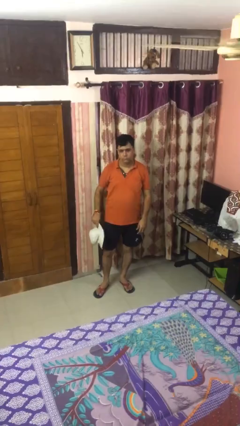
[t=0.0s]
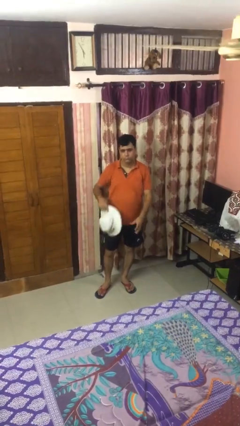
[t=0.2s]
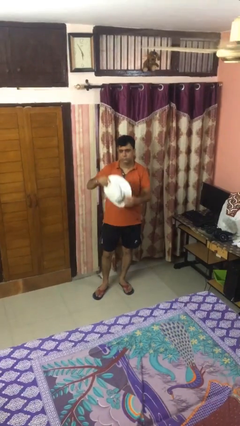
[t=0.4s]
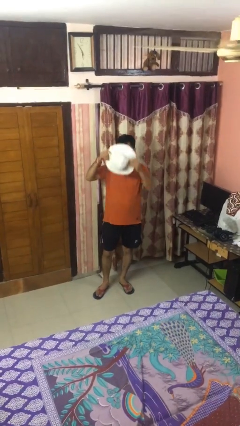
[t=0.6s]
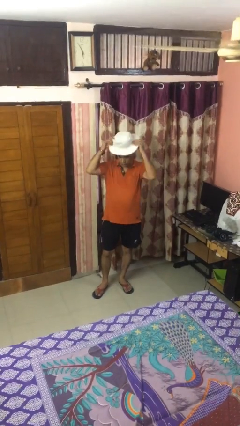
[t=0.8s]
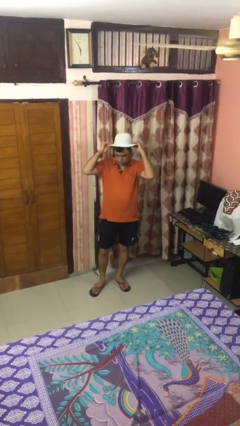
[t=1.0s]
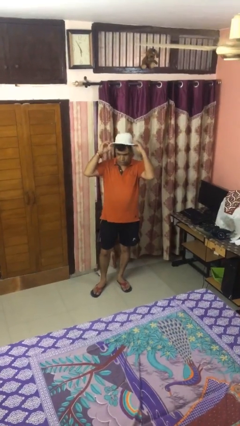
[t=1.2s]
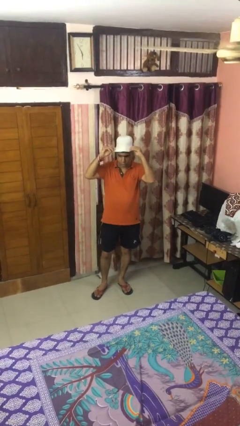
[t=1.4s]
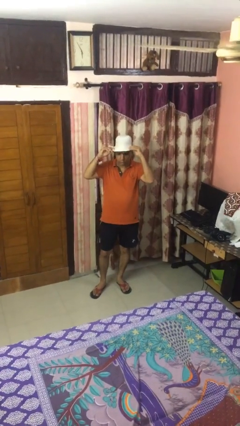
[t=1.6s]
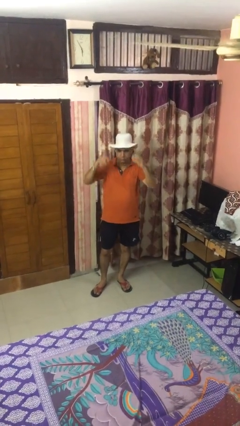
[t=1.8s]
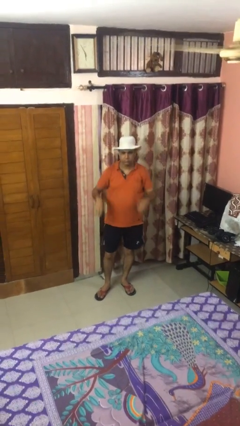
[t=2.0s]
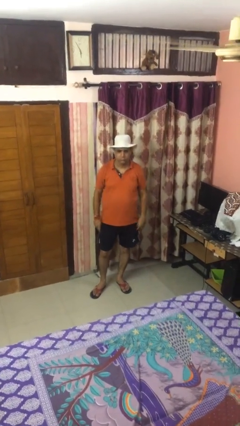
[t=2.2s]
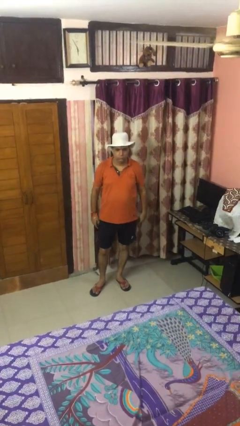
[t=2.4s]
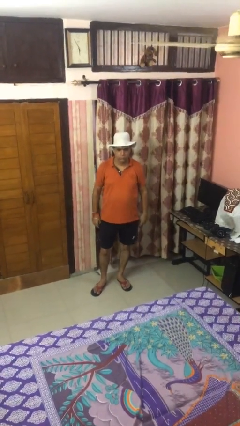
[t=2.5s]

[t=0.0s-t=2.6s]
person puts on hat

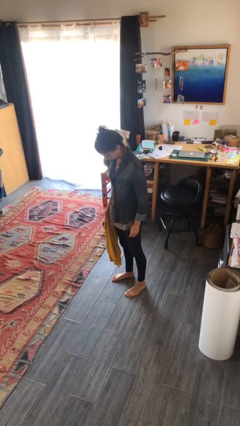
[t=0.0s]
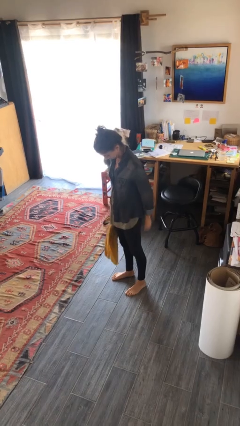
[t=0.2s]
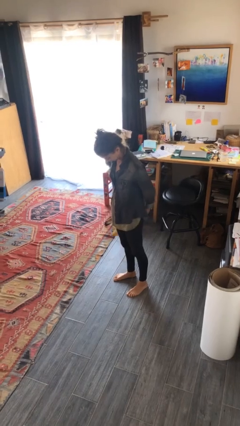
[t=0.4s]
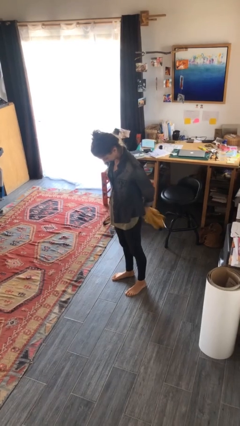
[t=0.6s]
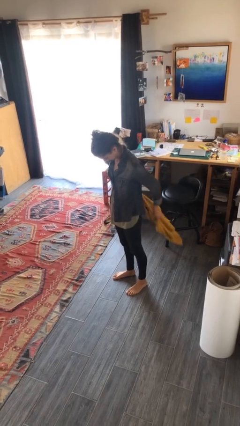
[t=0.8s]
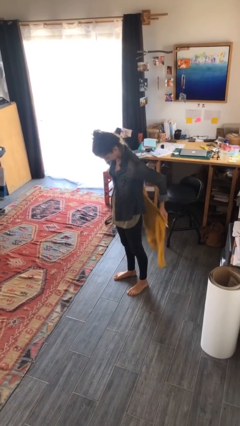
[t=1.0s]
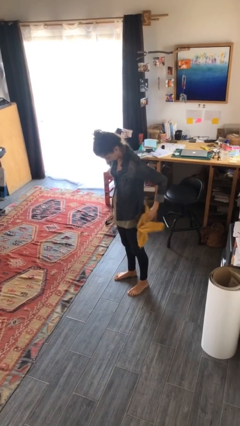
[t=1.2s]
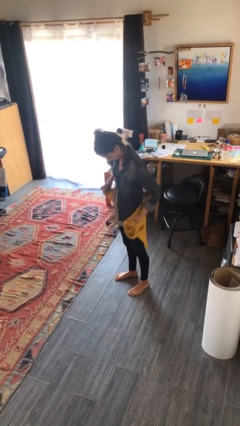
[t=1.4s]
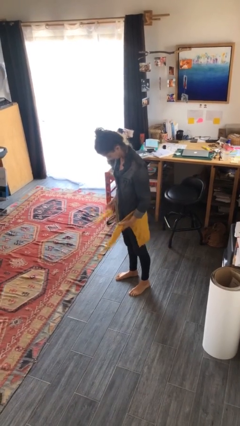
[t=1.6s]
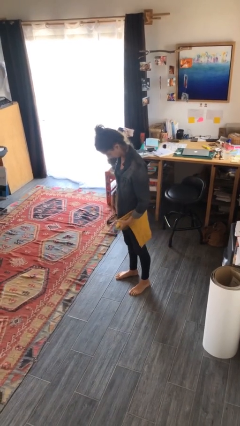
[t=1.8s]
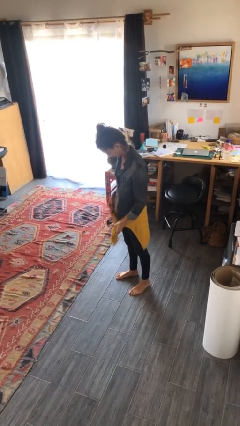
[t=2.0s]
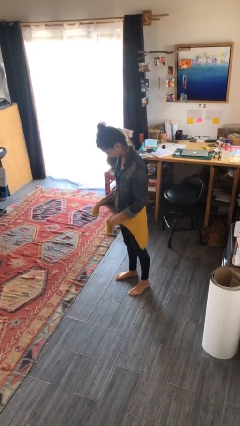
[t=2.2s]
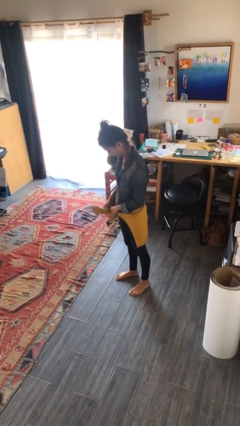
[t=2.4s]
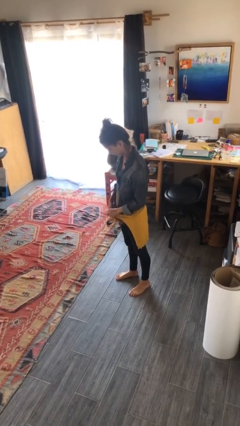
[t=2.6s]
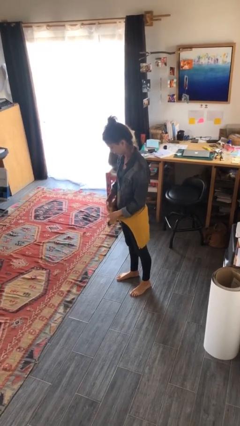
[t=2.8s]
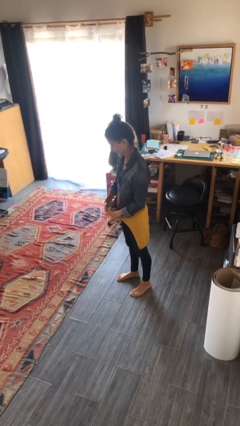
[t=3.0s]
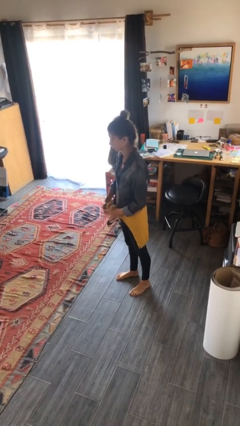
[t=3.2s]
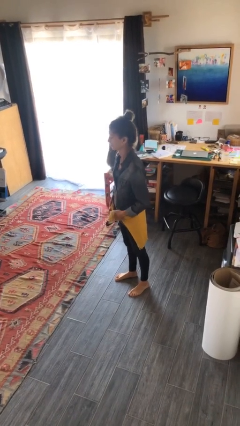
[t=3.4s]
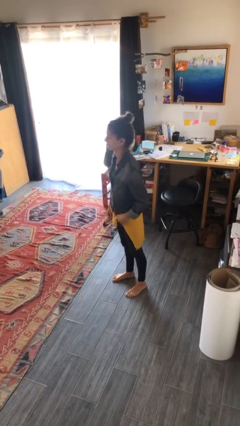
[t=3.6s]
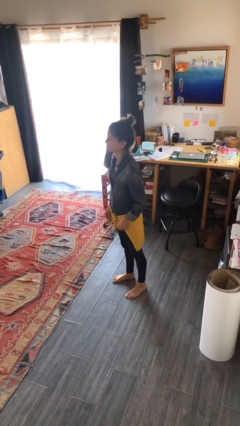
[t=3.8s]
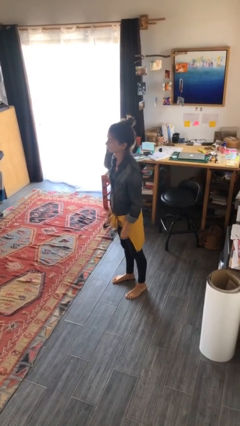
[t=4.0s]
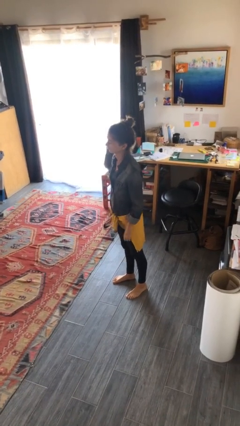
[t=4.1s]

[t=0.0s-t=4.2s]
person ties jacket around waist

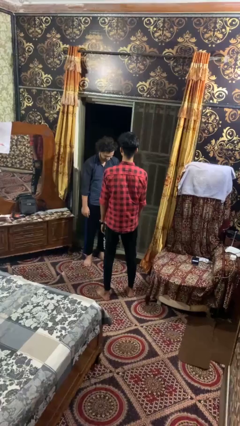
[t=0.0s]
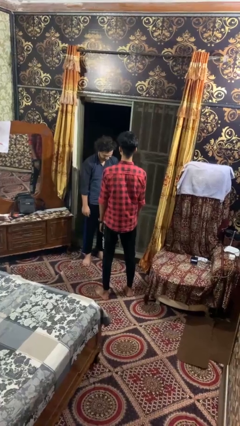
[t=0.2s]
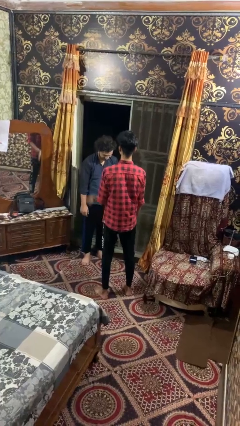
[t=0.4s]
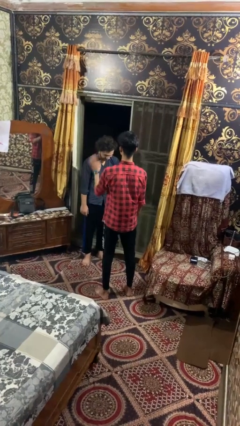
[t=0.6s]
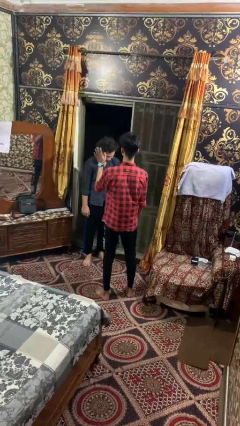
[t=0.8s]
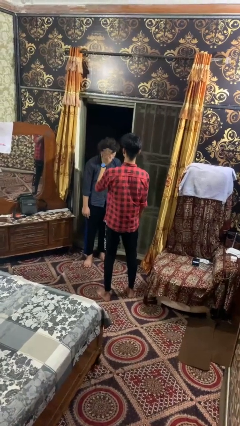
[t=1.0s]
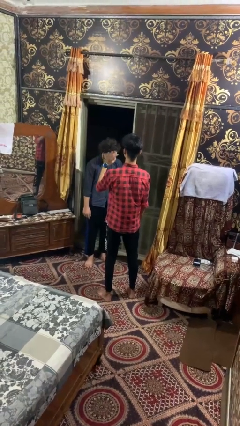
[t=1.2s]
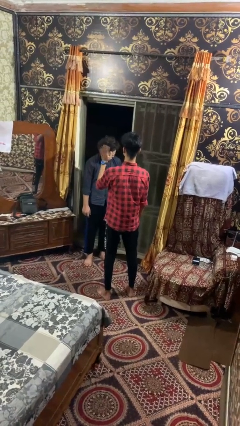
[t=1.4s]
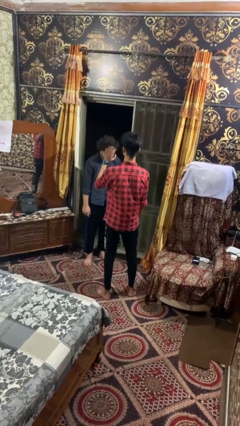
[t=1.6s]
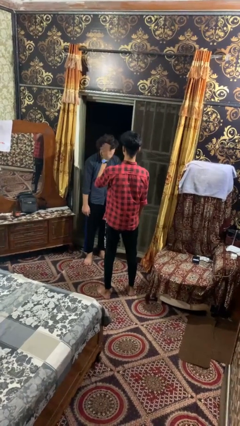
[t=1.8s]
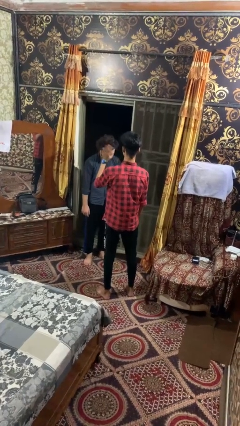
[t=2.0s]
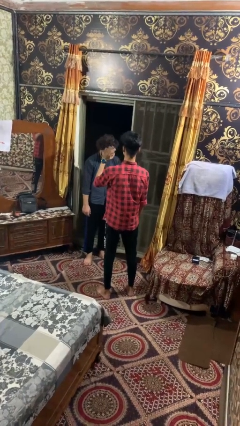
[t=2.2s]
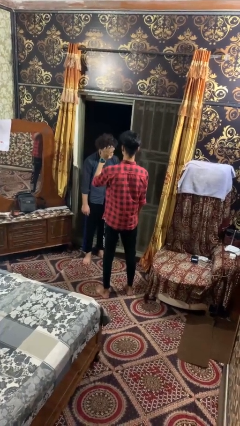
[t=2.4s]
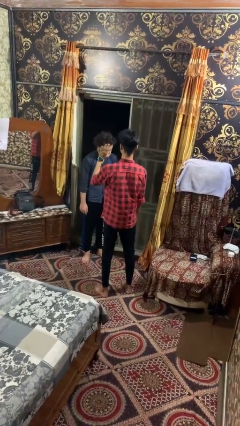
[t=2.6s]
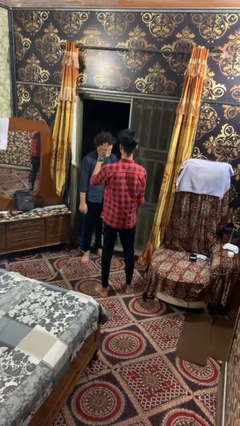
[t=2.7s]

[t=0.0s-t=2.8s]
person waves at person

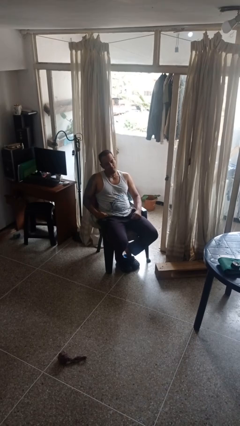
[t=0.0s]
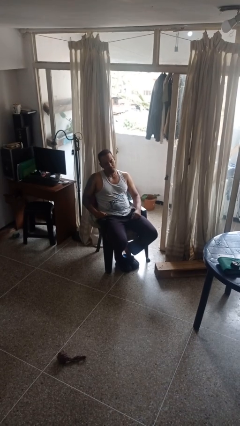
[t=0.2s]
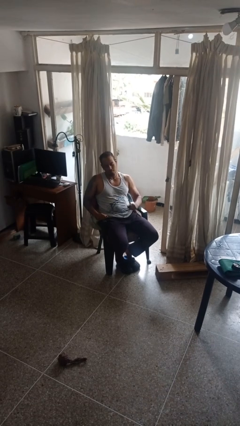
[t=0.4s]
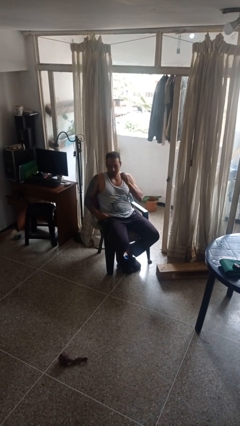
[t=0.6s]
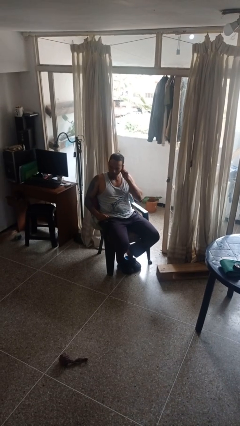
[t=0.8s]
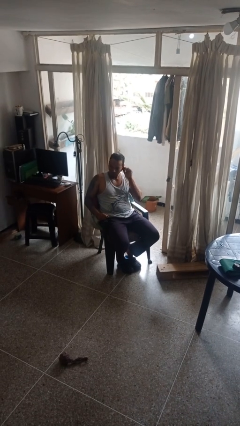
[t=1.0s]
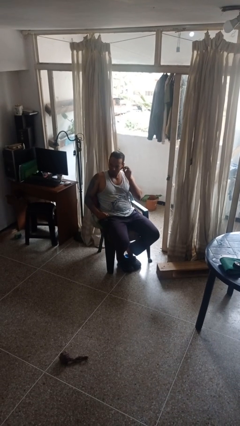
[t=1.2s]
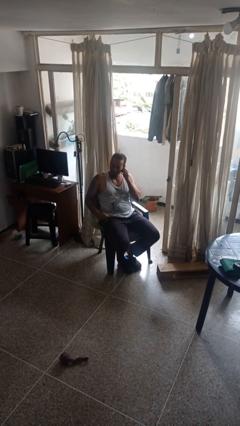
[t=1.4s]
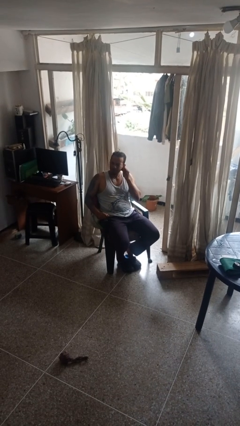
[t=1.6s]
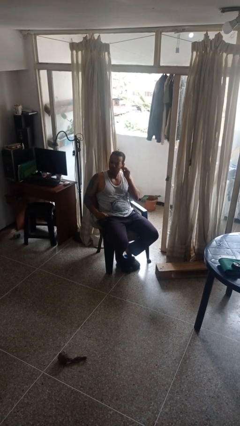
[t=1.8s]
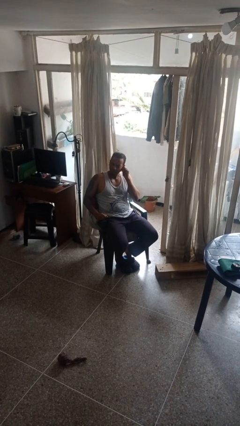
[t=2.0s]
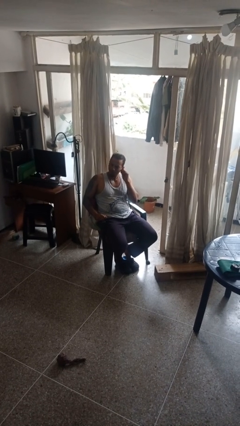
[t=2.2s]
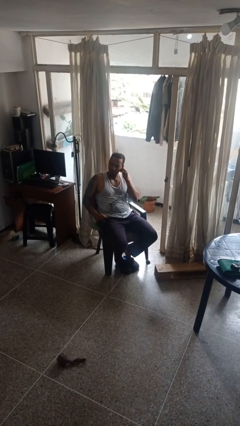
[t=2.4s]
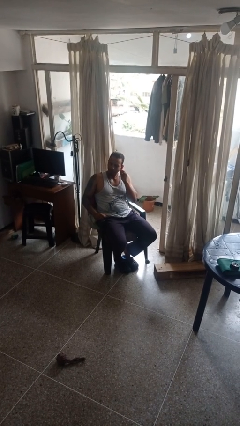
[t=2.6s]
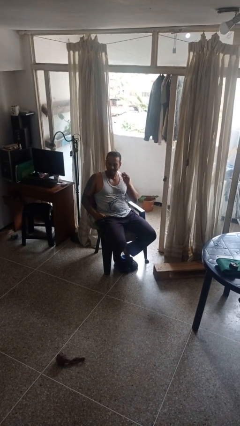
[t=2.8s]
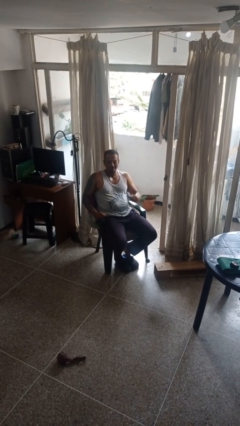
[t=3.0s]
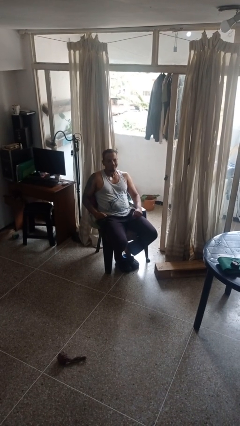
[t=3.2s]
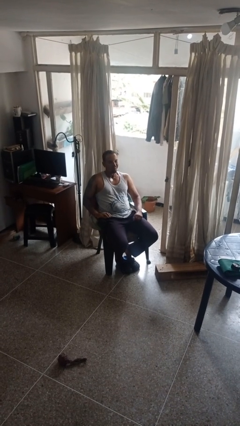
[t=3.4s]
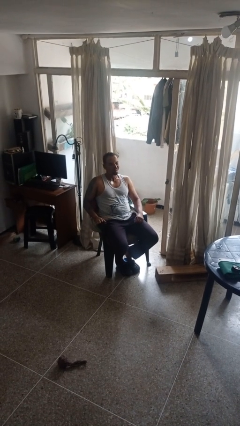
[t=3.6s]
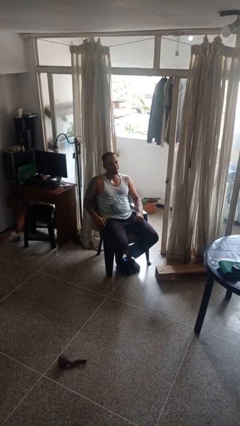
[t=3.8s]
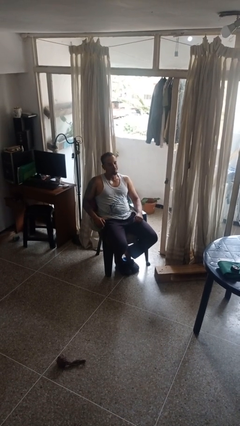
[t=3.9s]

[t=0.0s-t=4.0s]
person touches earlobe

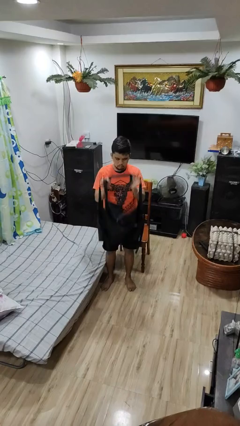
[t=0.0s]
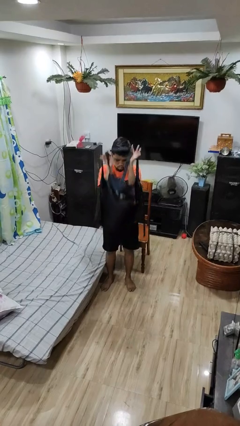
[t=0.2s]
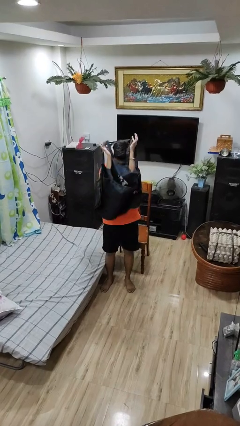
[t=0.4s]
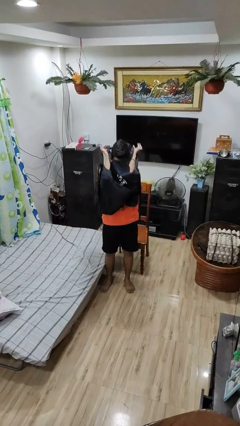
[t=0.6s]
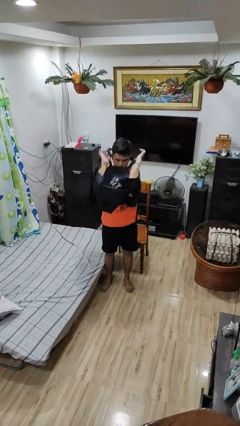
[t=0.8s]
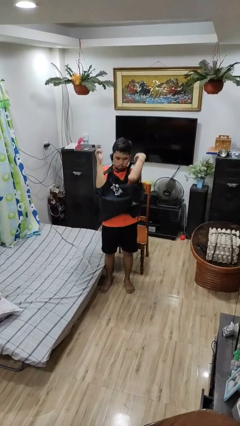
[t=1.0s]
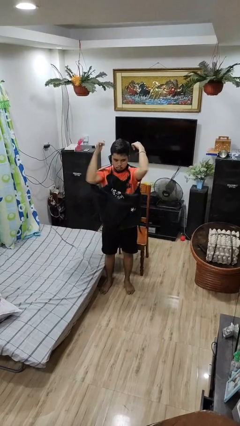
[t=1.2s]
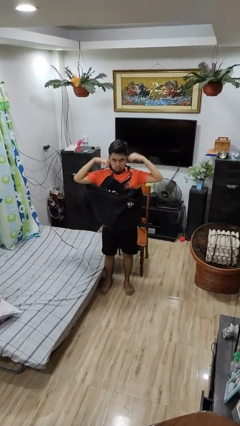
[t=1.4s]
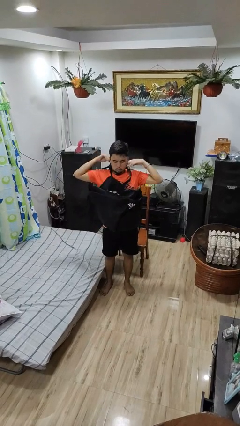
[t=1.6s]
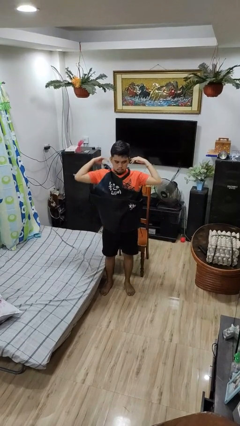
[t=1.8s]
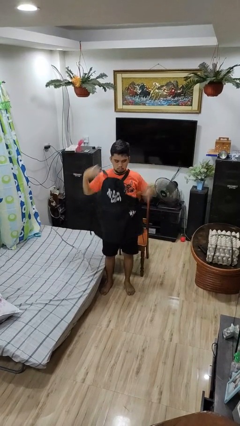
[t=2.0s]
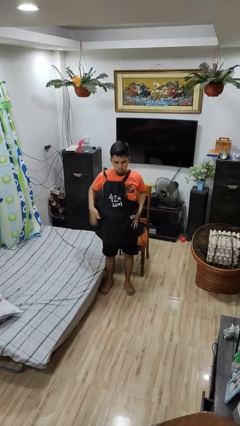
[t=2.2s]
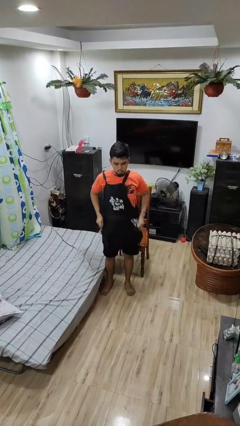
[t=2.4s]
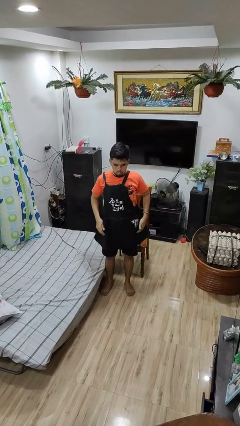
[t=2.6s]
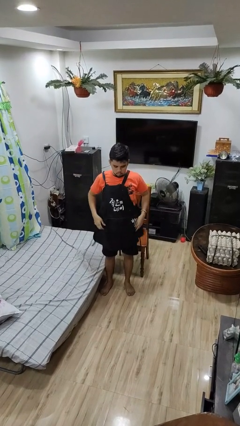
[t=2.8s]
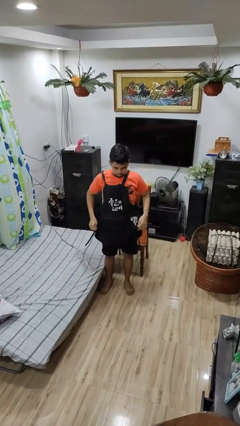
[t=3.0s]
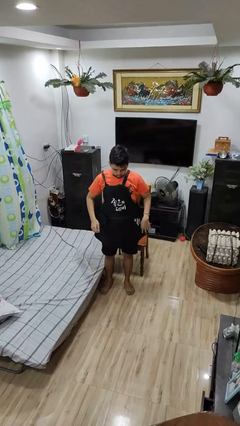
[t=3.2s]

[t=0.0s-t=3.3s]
person puts on apron

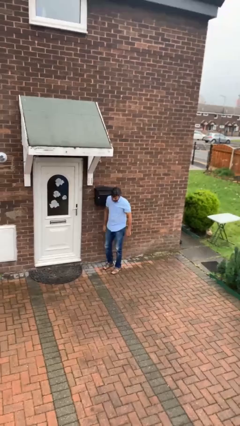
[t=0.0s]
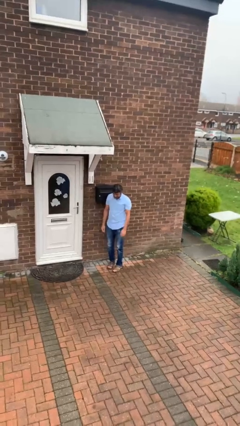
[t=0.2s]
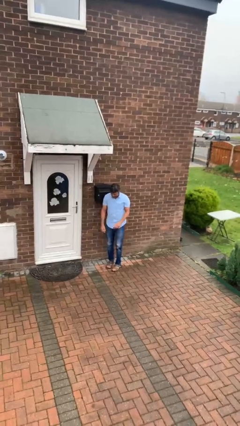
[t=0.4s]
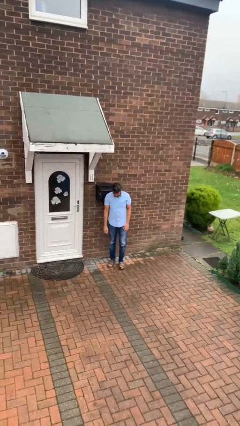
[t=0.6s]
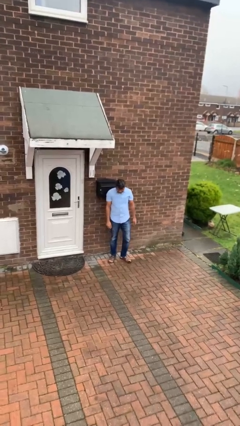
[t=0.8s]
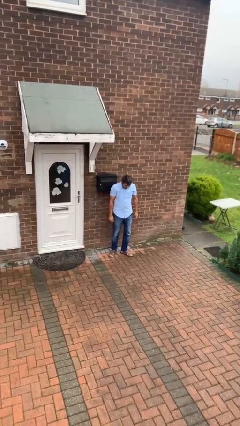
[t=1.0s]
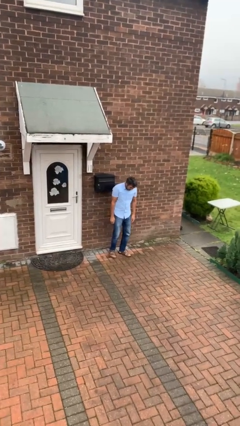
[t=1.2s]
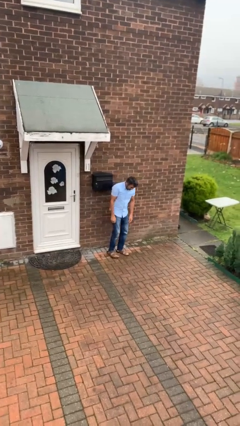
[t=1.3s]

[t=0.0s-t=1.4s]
person stands up
